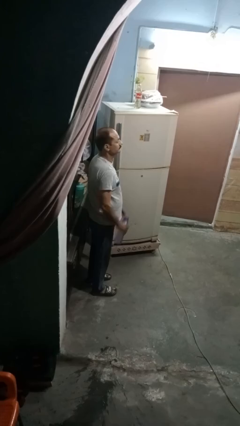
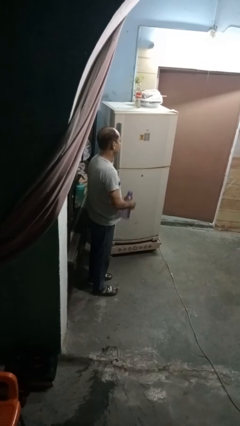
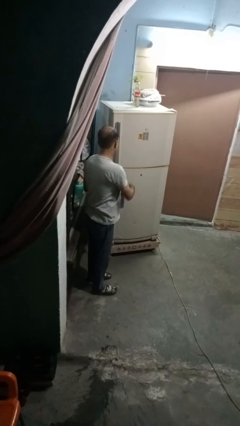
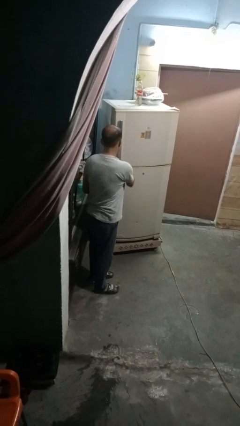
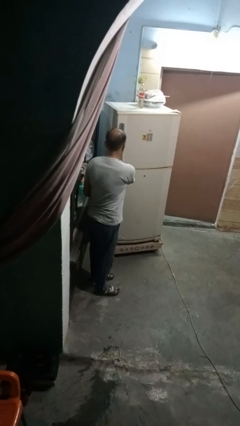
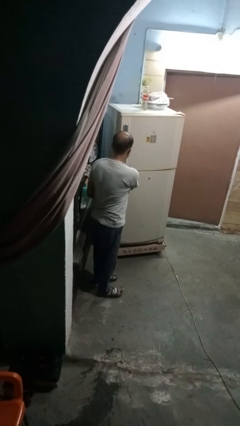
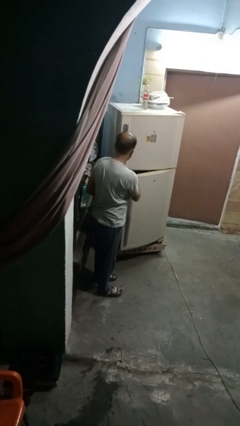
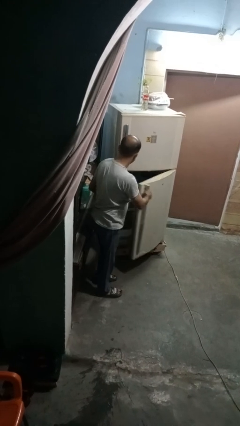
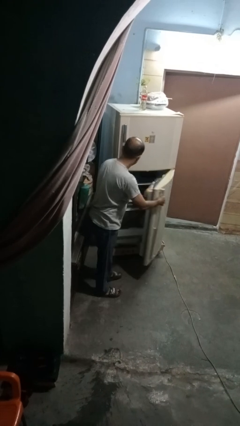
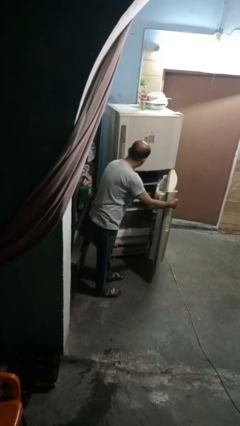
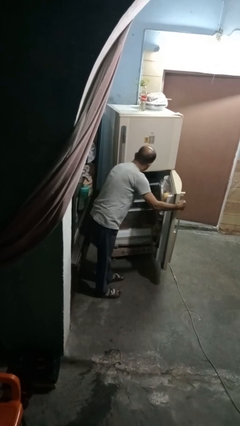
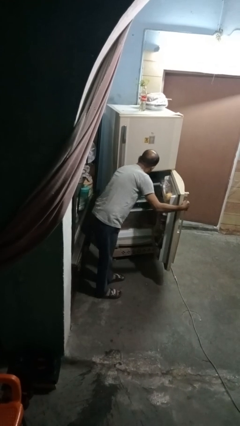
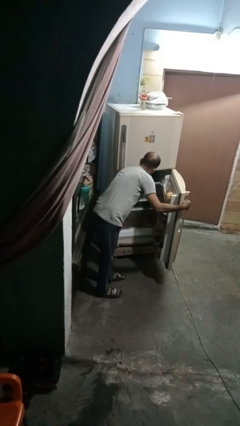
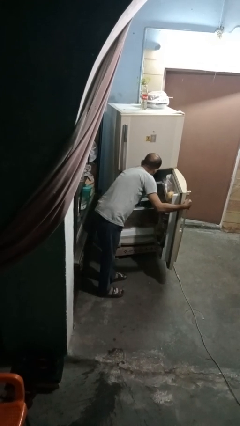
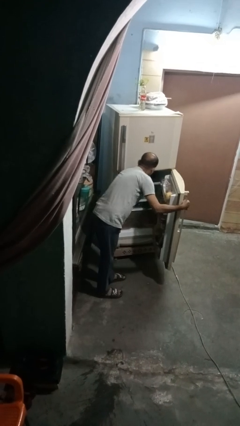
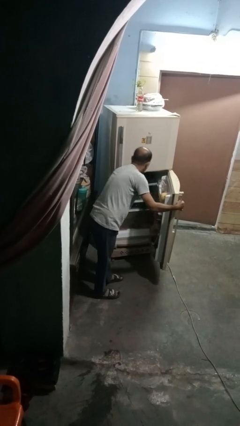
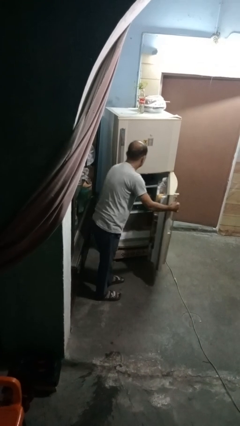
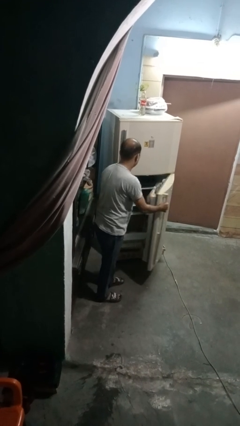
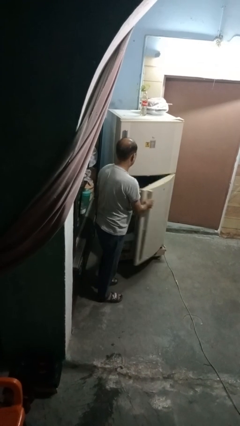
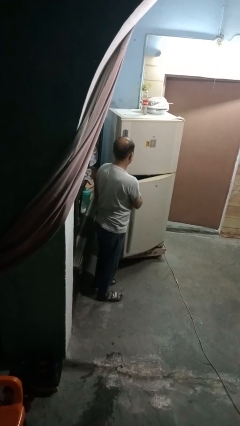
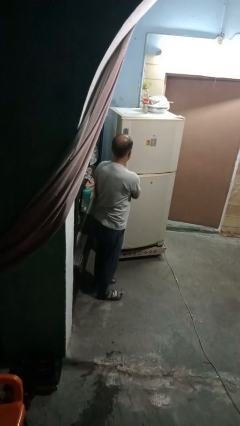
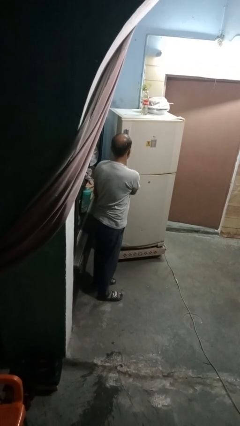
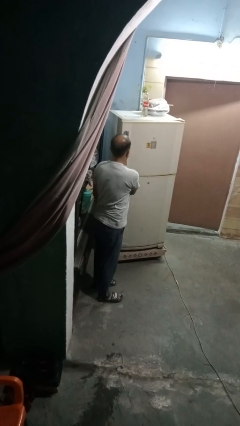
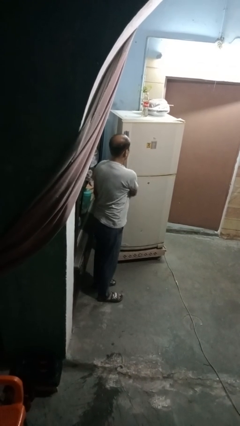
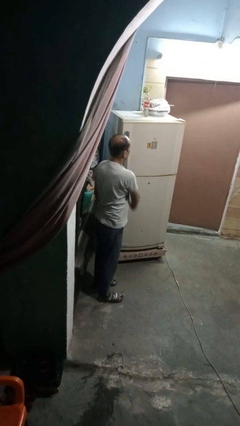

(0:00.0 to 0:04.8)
person puts object into refrigerator

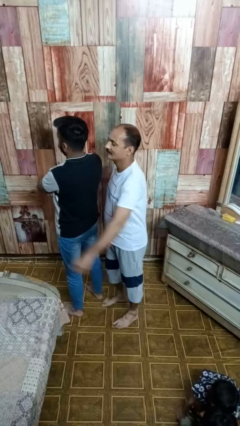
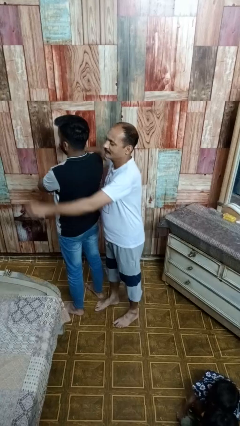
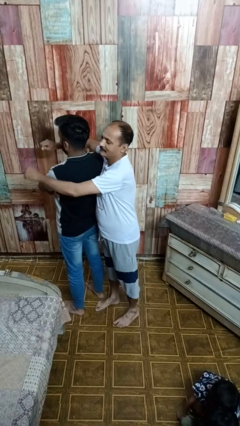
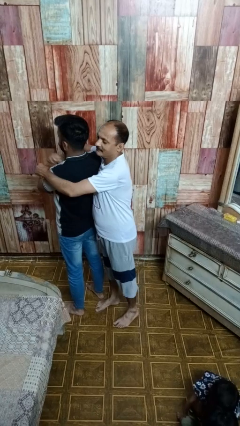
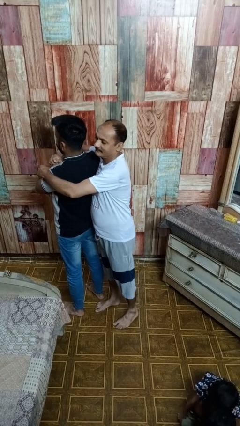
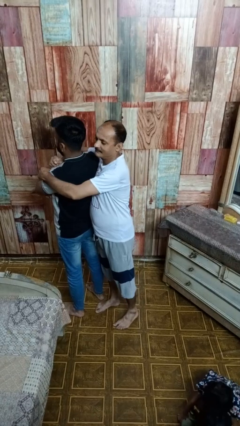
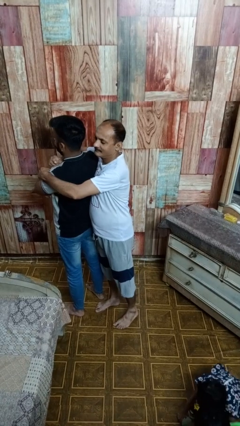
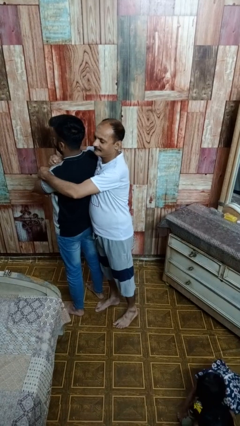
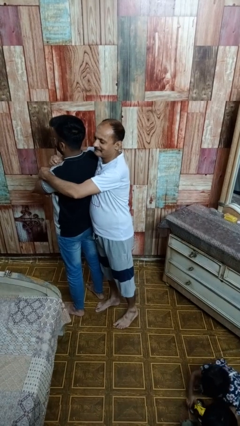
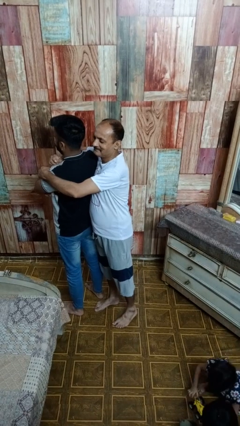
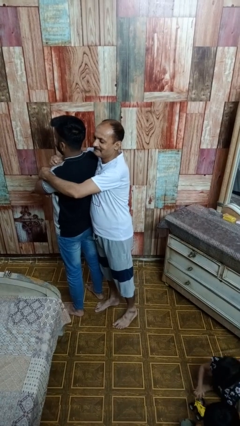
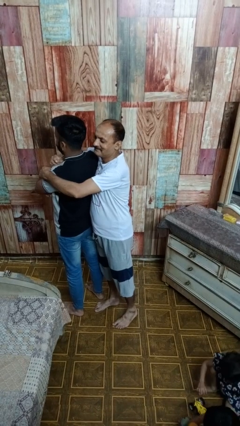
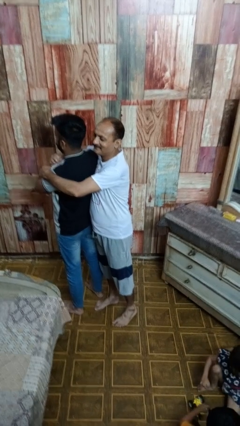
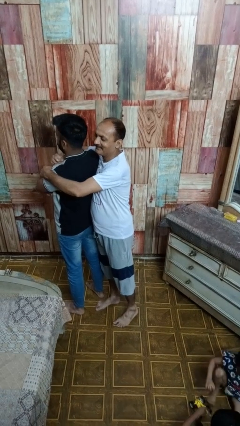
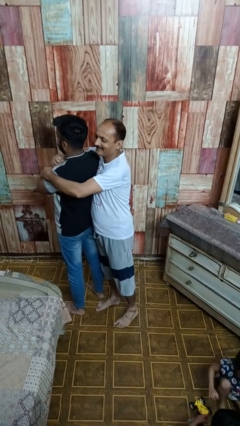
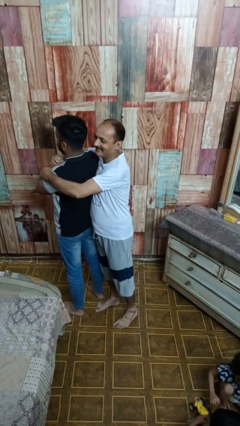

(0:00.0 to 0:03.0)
person hugs person from behind

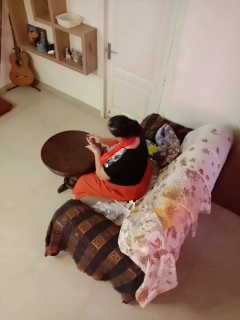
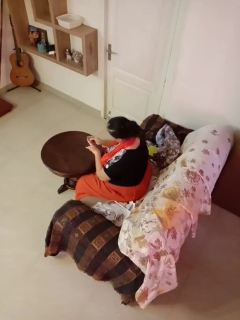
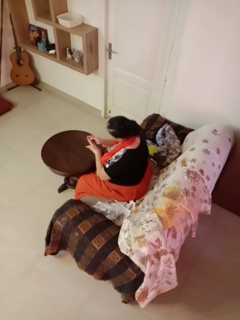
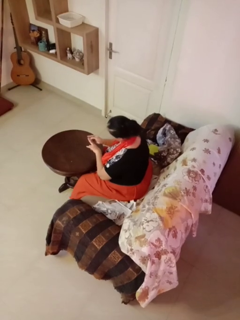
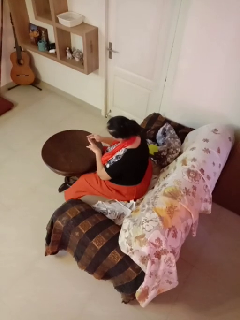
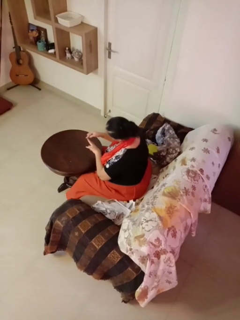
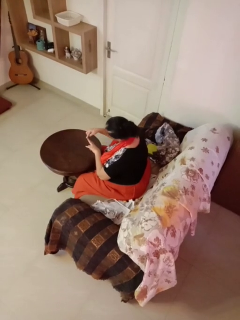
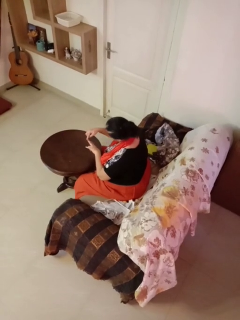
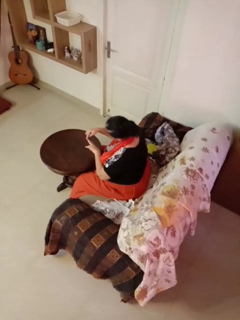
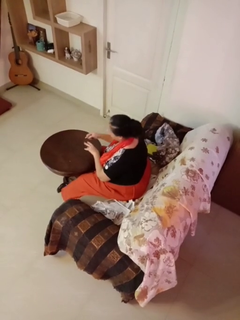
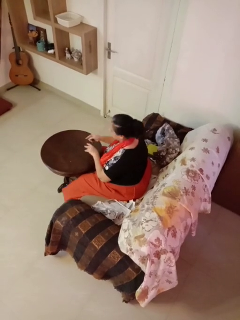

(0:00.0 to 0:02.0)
person files fingernails

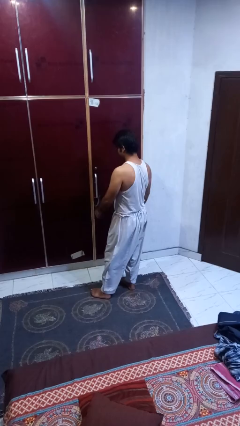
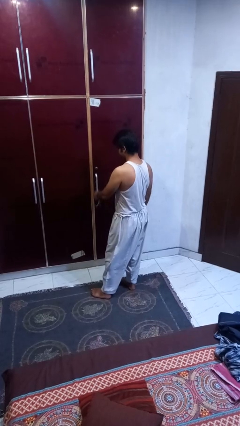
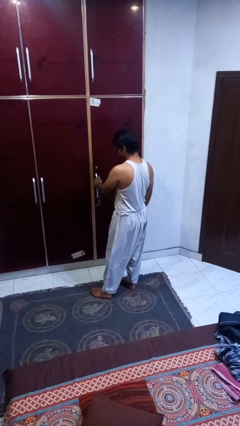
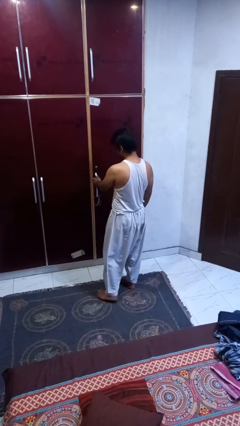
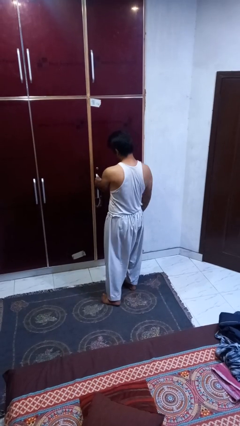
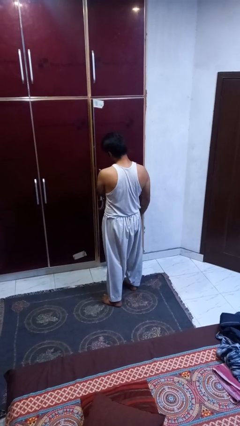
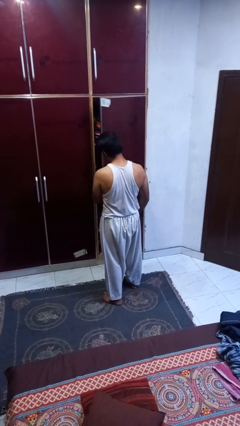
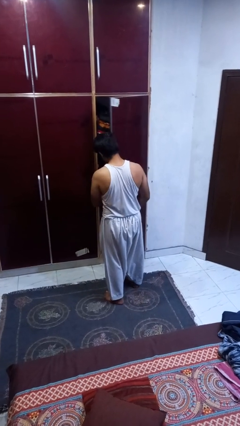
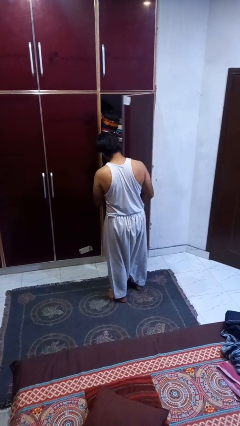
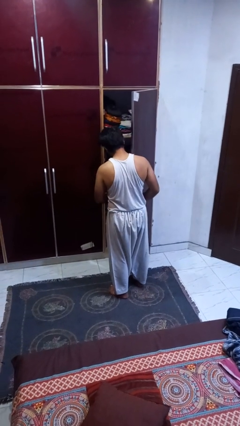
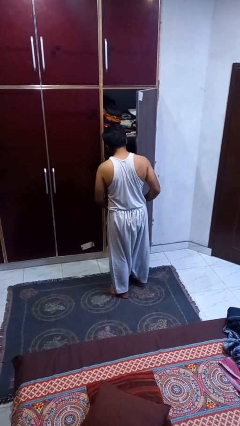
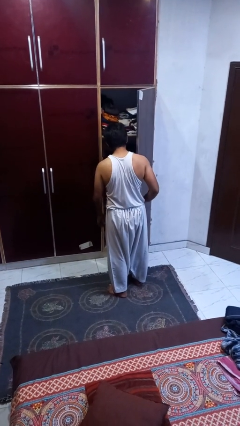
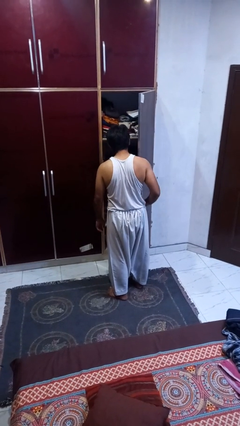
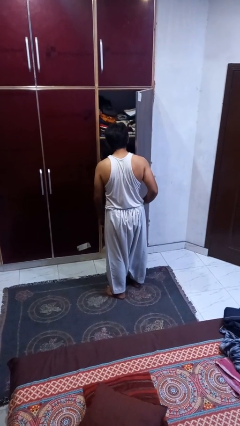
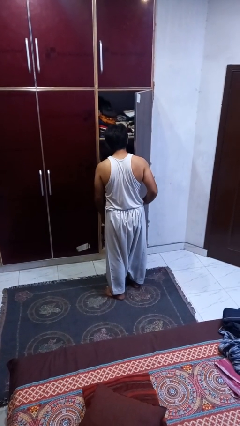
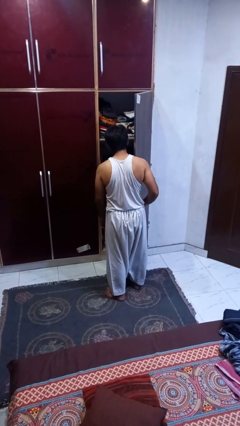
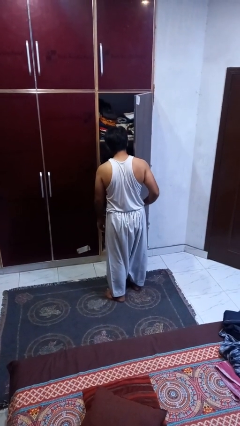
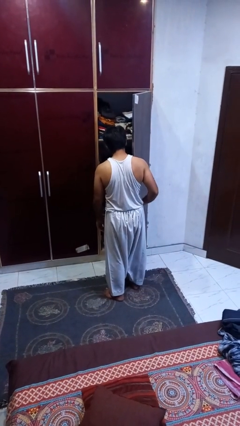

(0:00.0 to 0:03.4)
person opens closet door

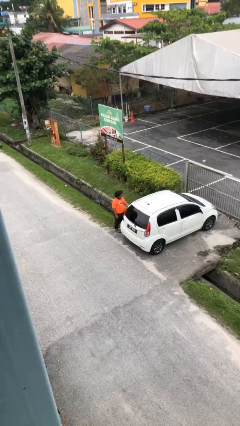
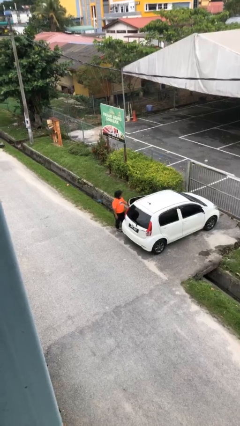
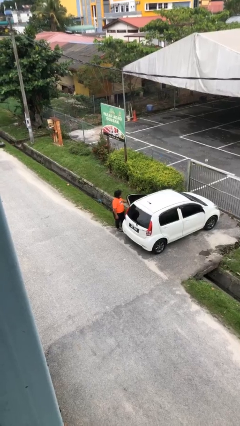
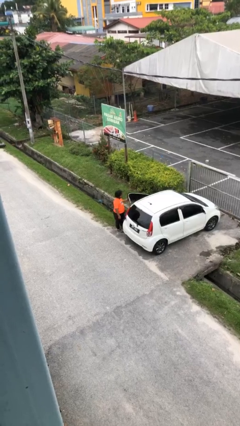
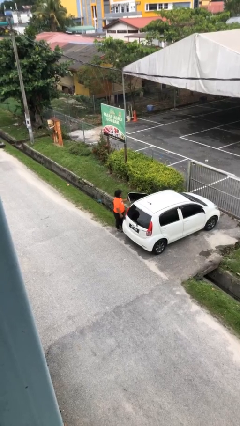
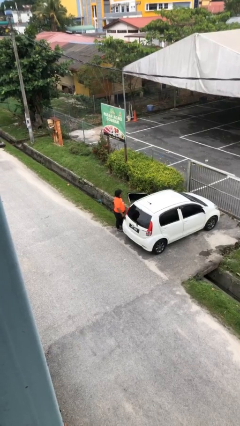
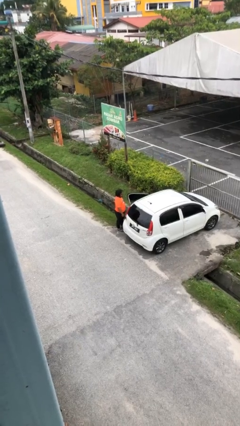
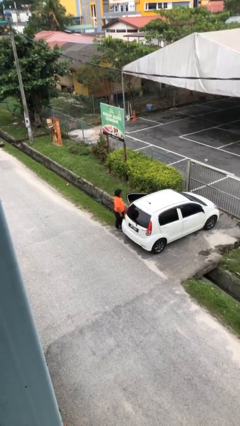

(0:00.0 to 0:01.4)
person opens car door

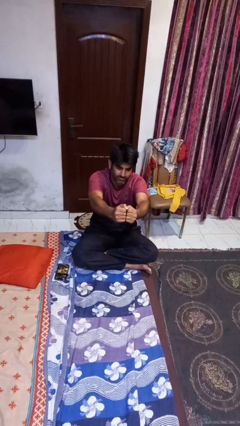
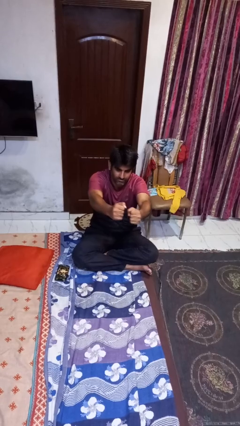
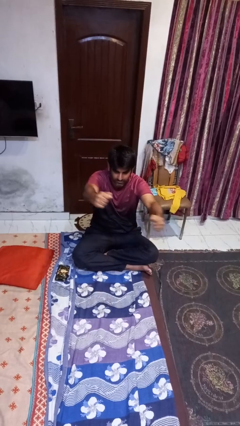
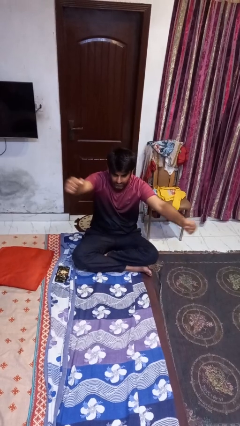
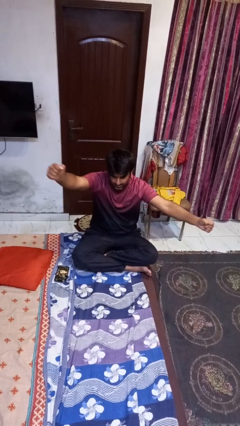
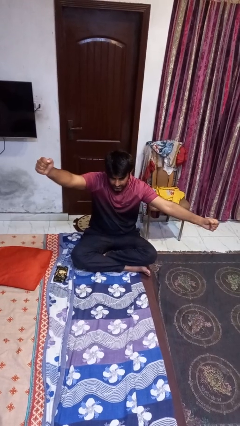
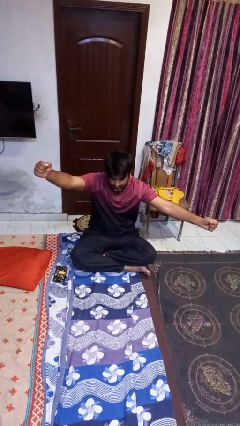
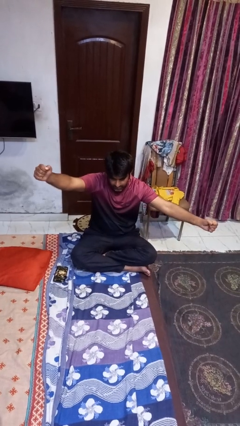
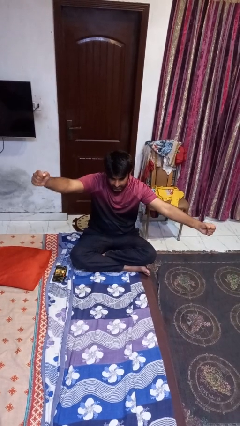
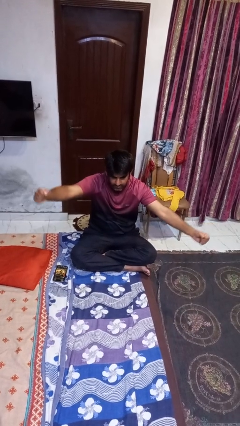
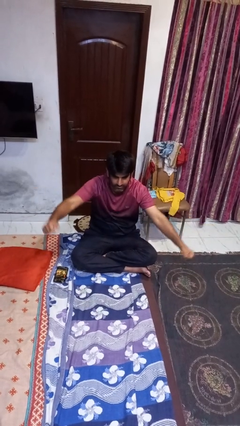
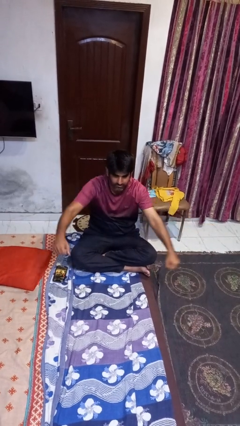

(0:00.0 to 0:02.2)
person gestures zoom out

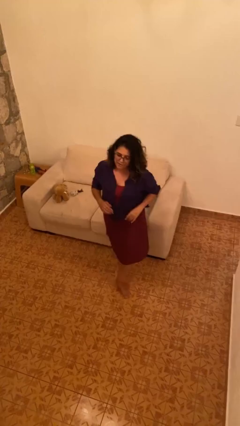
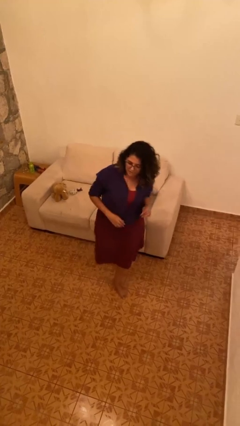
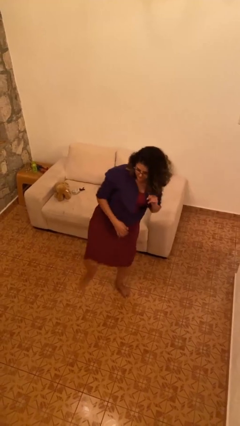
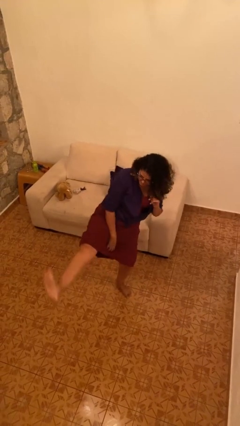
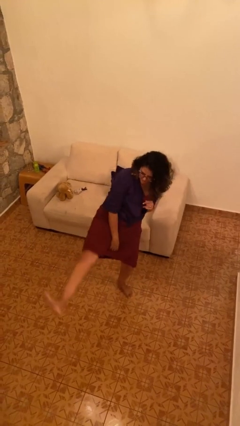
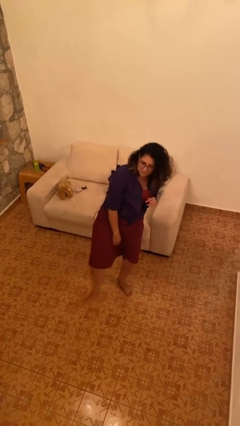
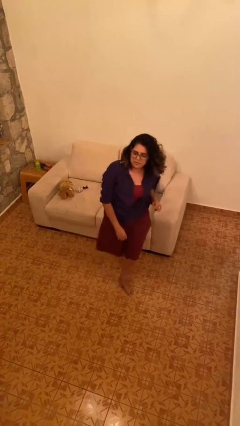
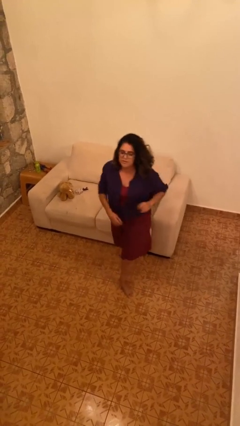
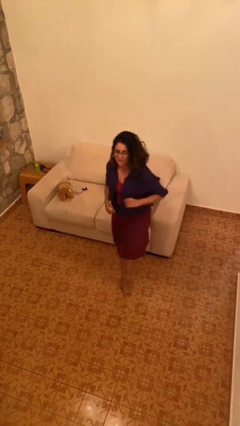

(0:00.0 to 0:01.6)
person karate kicks
